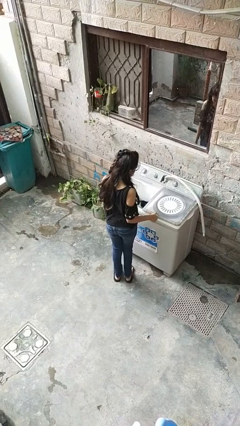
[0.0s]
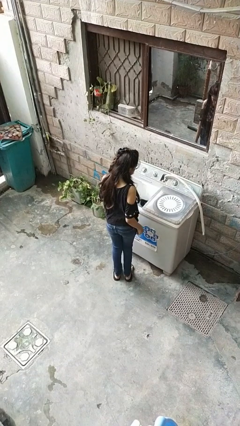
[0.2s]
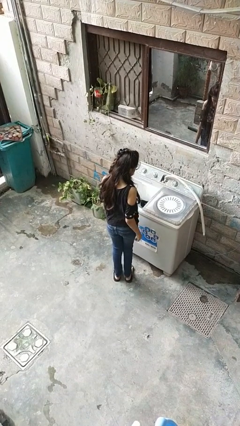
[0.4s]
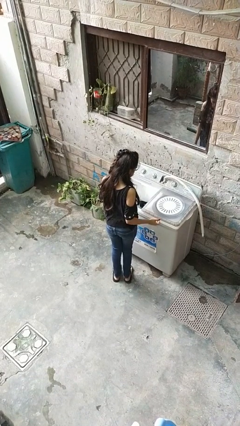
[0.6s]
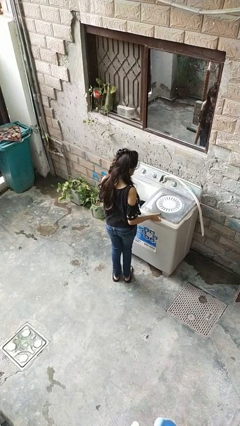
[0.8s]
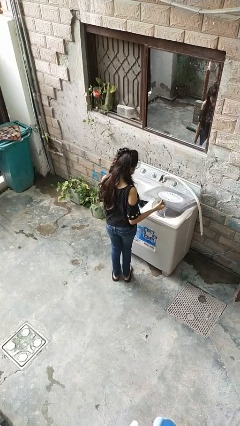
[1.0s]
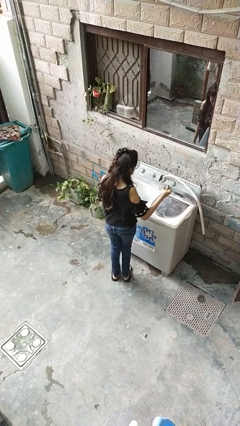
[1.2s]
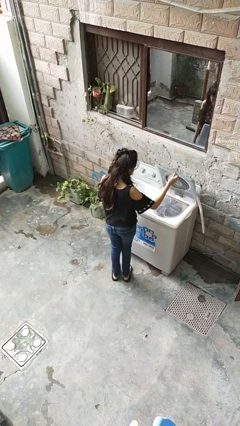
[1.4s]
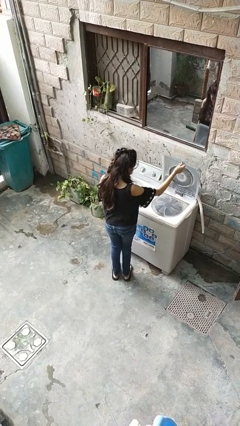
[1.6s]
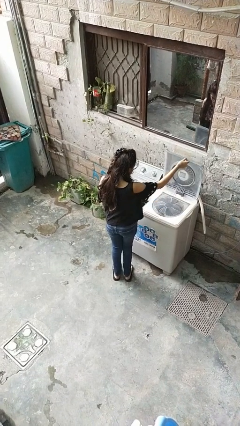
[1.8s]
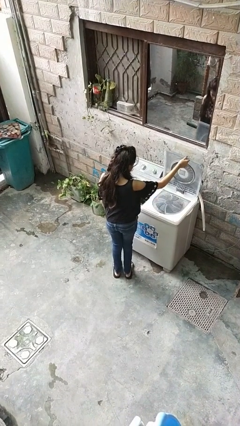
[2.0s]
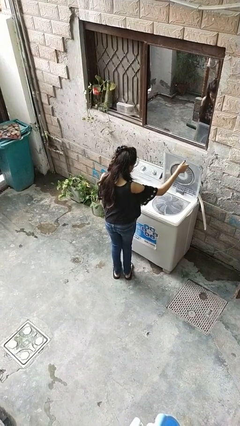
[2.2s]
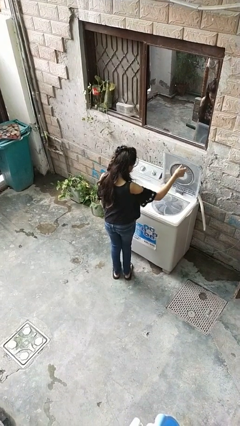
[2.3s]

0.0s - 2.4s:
person opens clothes washer

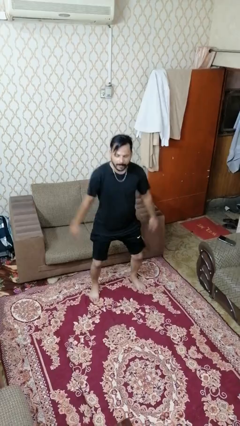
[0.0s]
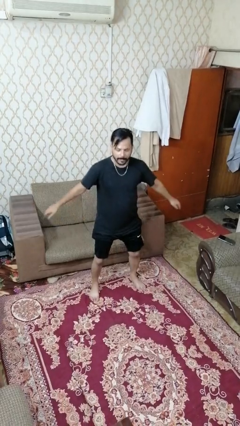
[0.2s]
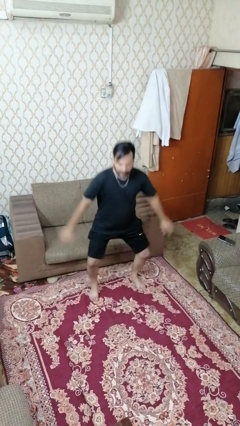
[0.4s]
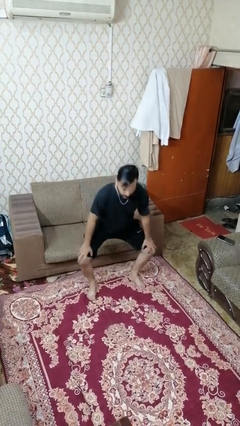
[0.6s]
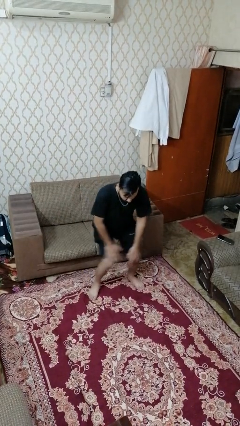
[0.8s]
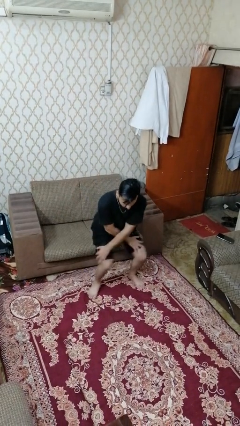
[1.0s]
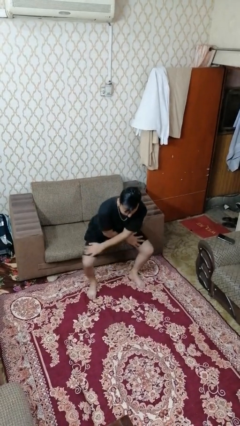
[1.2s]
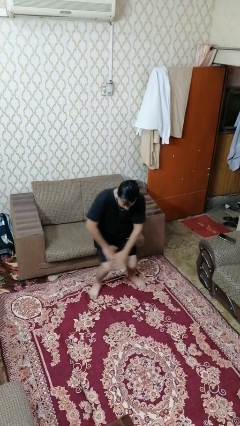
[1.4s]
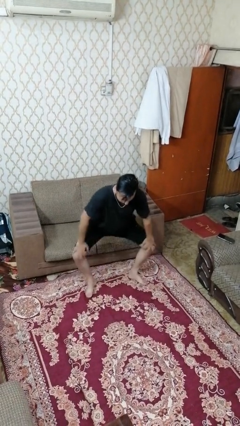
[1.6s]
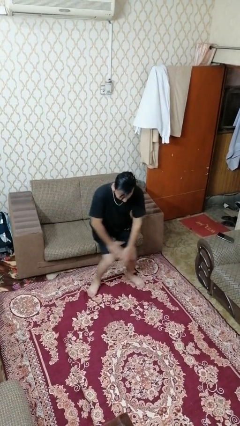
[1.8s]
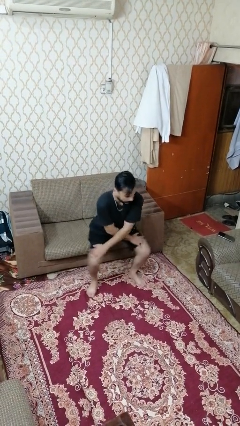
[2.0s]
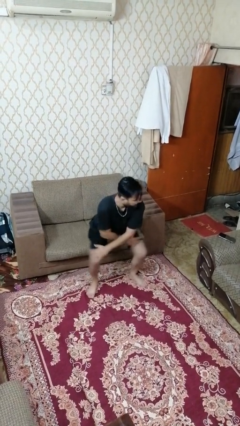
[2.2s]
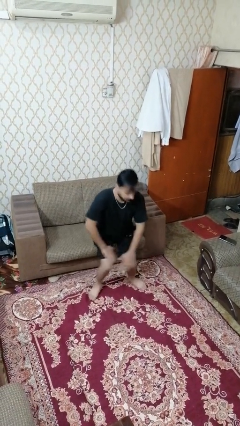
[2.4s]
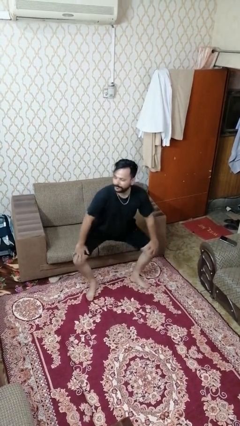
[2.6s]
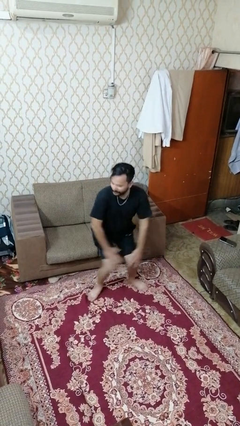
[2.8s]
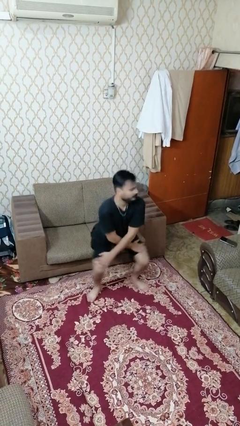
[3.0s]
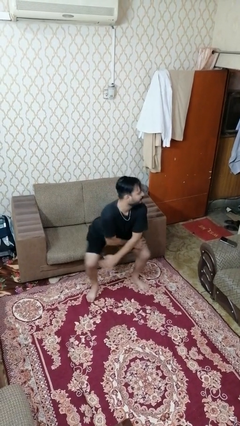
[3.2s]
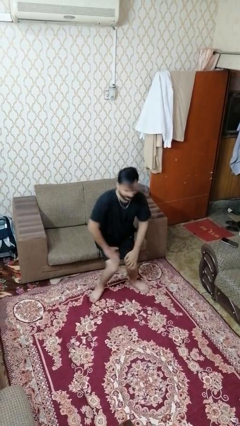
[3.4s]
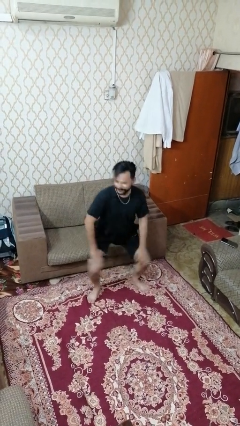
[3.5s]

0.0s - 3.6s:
person dances in place

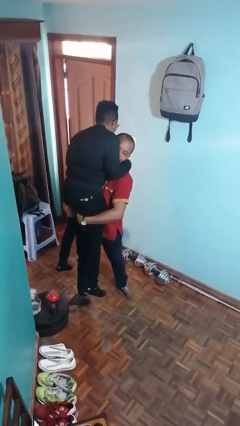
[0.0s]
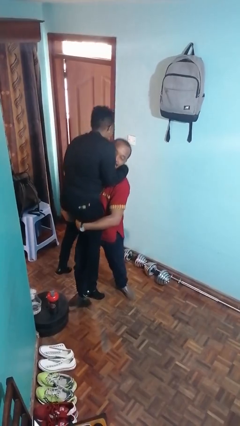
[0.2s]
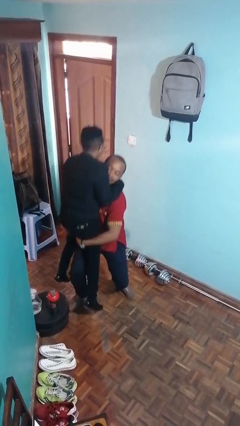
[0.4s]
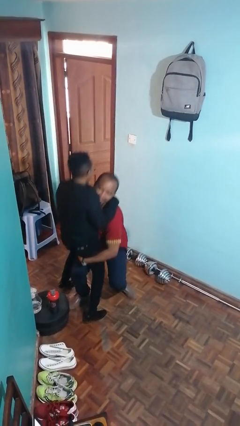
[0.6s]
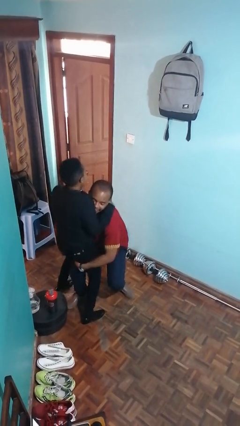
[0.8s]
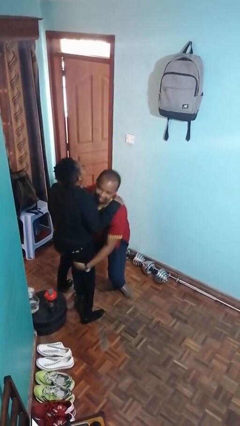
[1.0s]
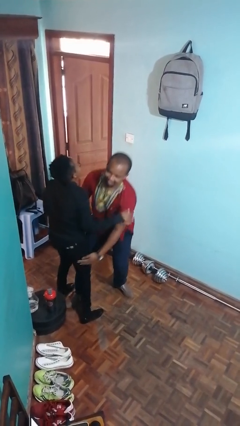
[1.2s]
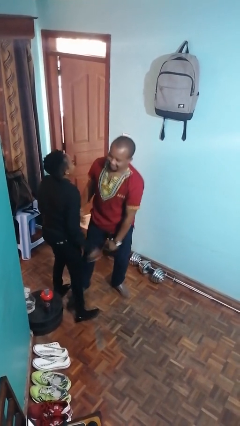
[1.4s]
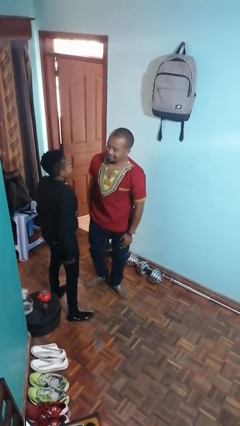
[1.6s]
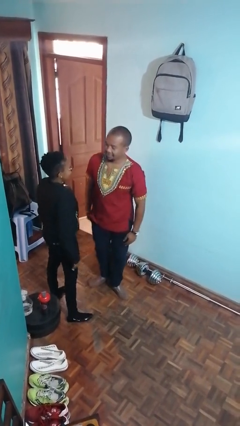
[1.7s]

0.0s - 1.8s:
person puts down person

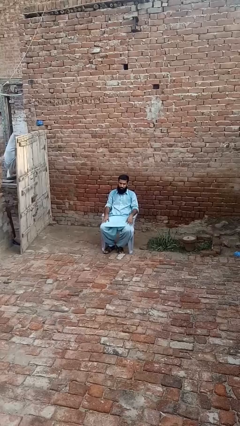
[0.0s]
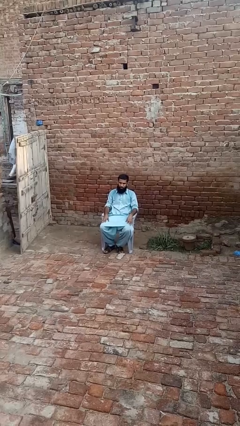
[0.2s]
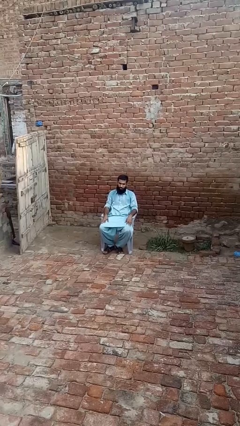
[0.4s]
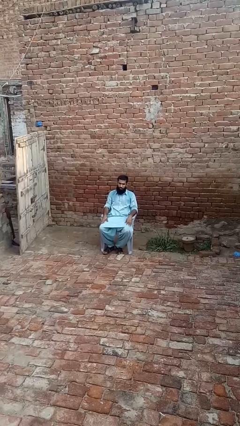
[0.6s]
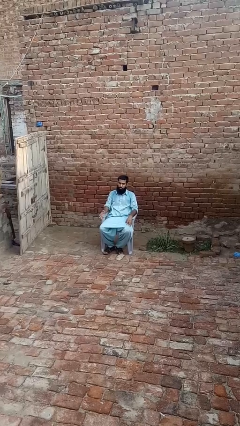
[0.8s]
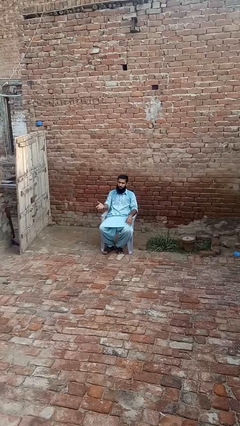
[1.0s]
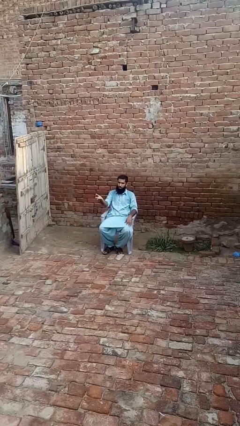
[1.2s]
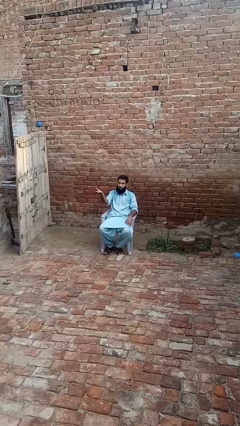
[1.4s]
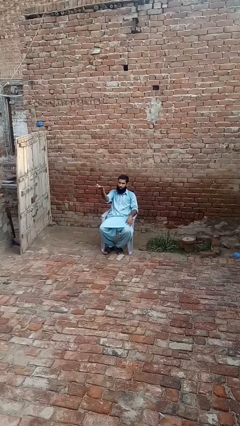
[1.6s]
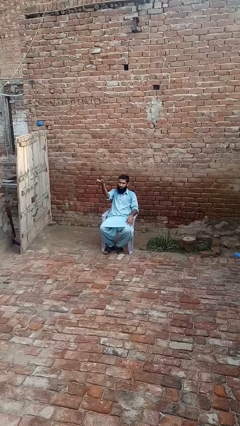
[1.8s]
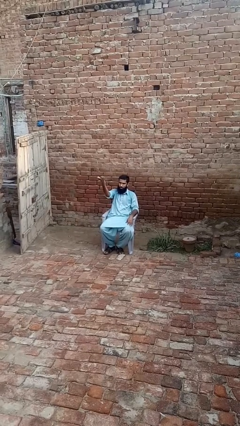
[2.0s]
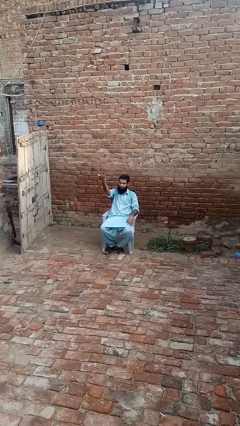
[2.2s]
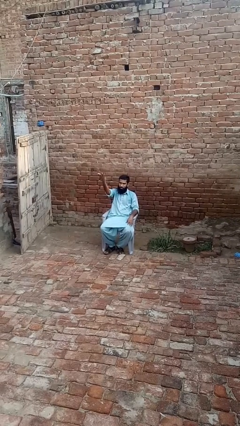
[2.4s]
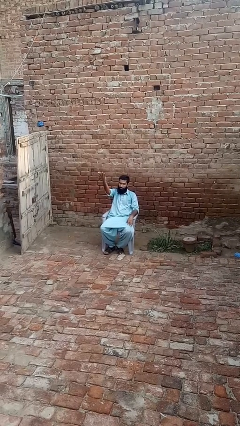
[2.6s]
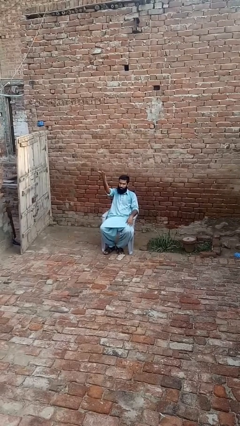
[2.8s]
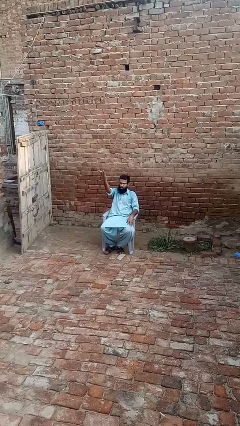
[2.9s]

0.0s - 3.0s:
person gestures swipe up

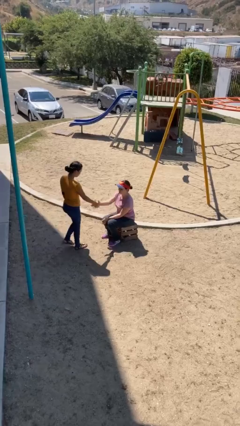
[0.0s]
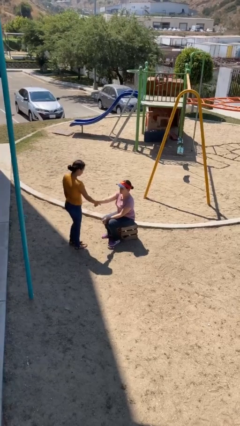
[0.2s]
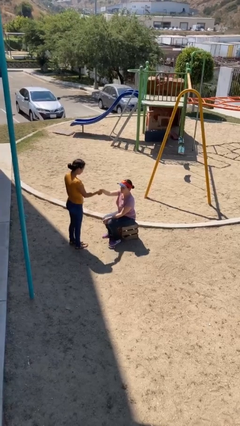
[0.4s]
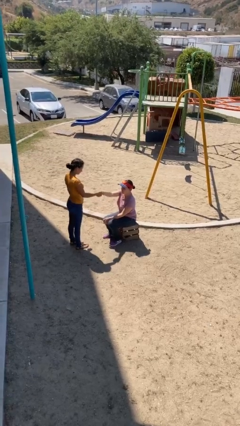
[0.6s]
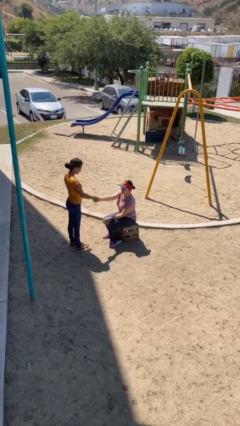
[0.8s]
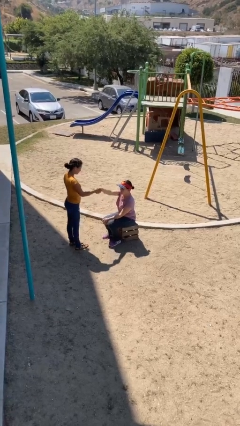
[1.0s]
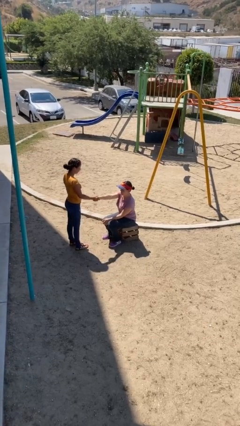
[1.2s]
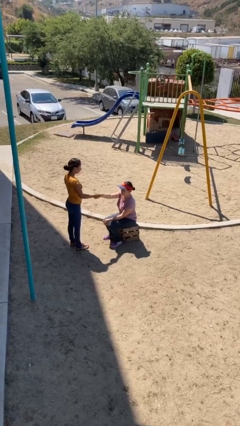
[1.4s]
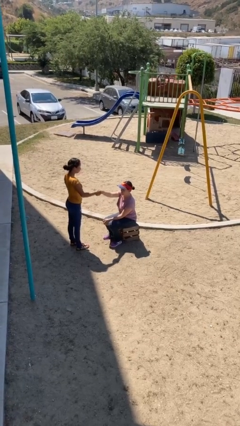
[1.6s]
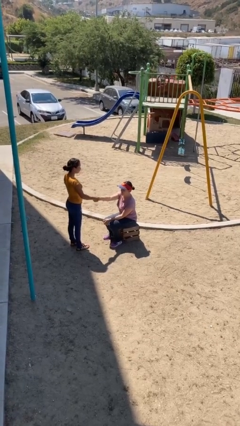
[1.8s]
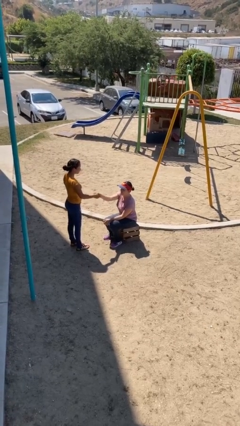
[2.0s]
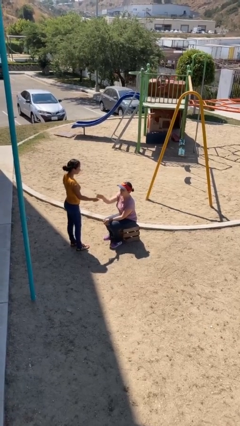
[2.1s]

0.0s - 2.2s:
person shakes hand

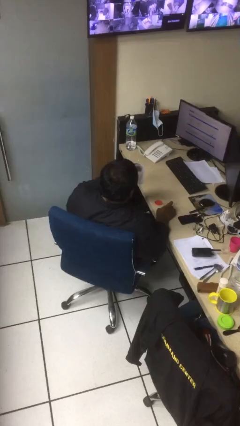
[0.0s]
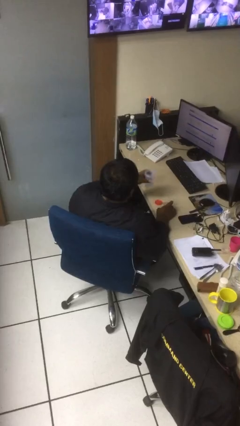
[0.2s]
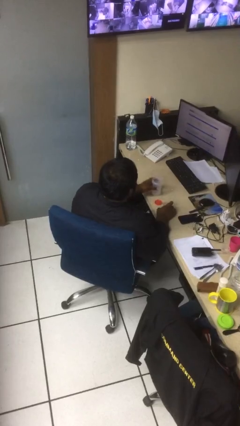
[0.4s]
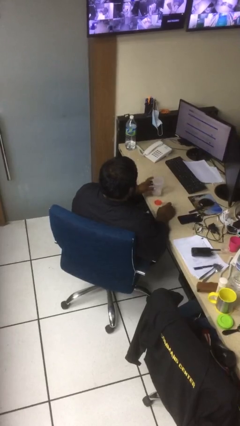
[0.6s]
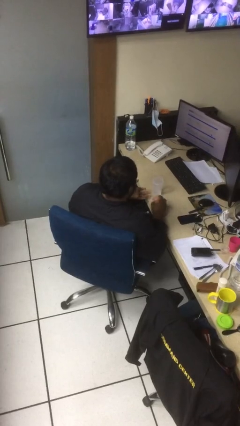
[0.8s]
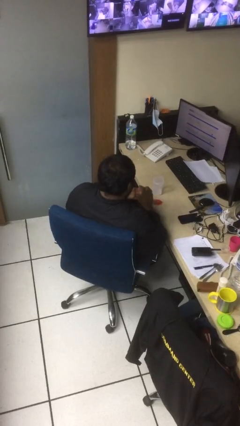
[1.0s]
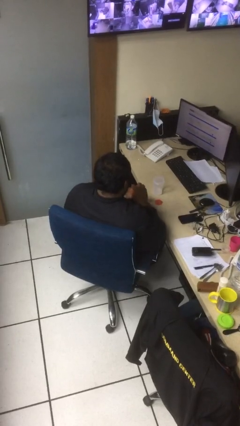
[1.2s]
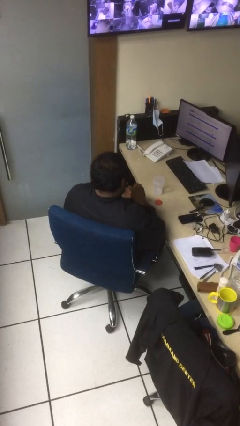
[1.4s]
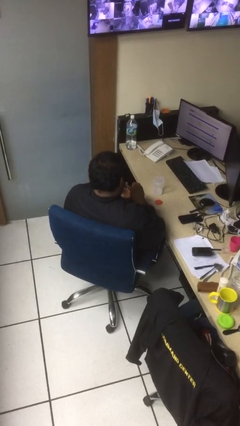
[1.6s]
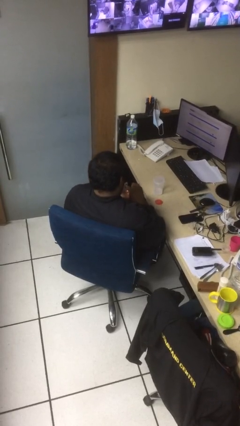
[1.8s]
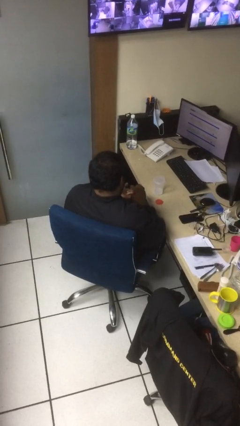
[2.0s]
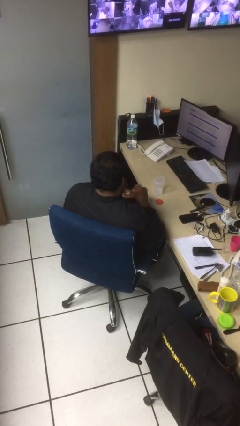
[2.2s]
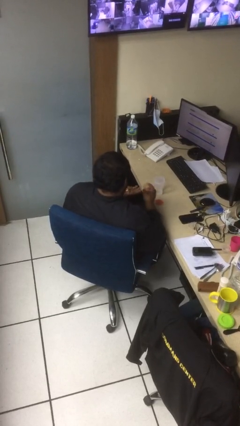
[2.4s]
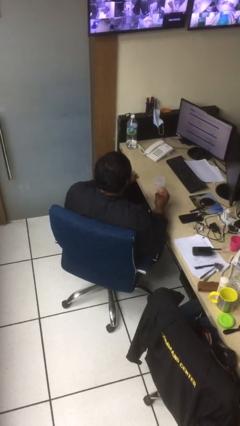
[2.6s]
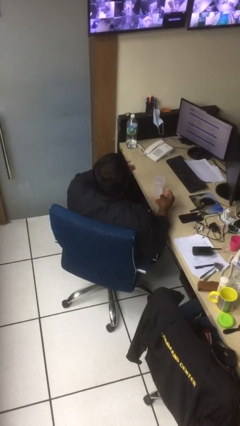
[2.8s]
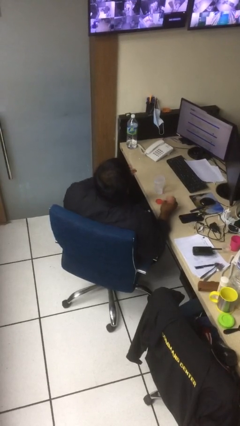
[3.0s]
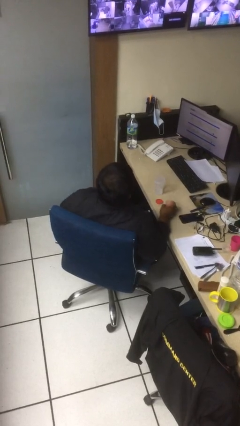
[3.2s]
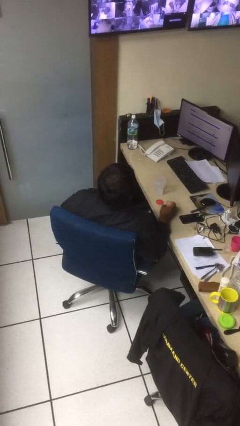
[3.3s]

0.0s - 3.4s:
person takes medicine pills

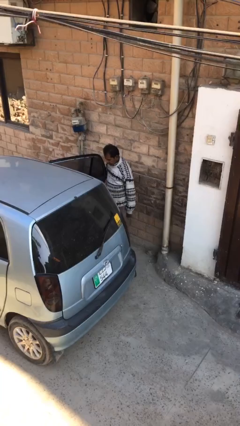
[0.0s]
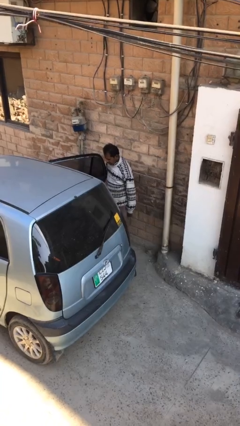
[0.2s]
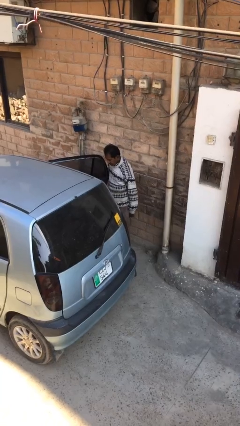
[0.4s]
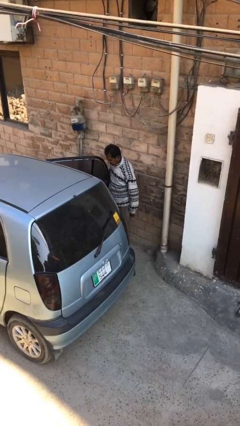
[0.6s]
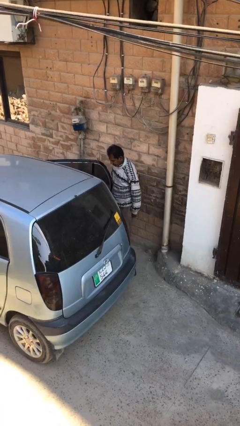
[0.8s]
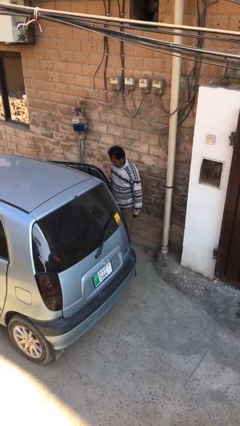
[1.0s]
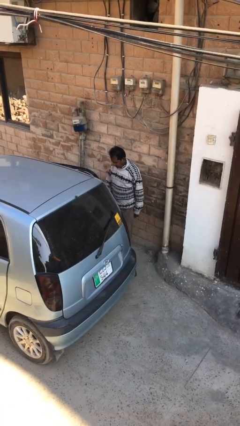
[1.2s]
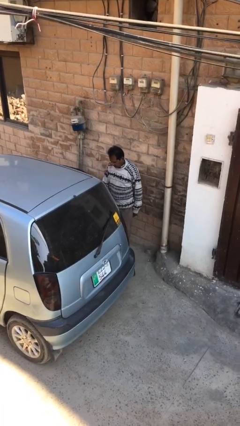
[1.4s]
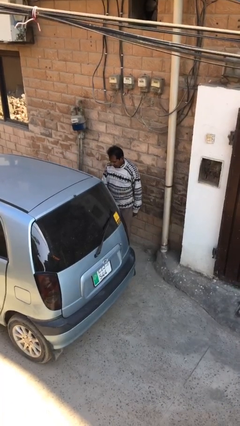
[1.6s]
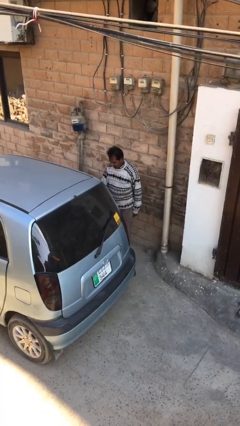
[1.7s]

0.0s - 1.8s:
person closes car door
